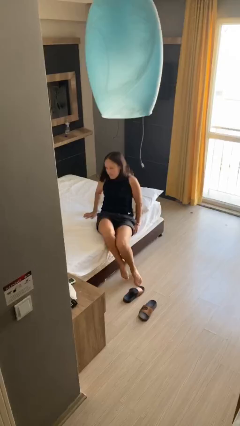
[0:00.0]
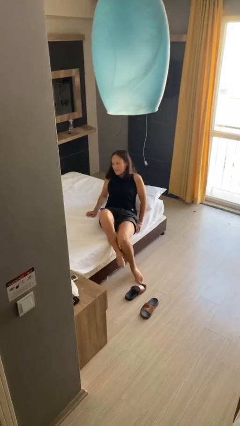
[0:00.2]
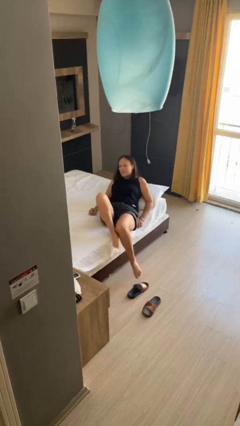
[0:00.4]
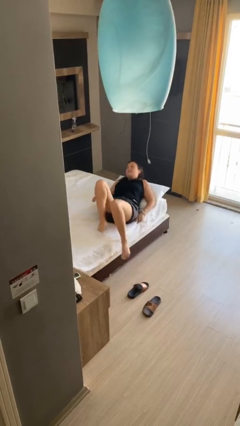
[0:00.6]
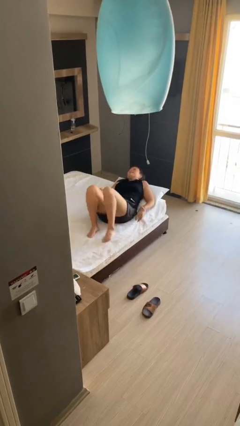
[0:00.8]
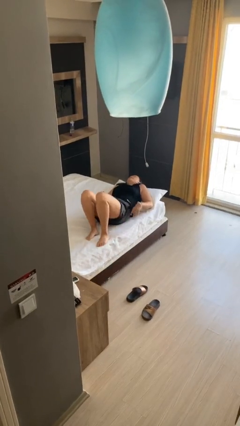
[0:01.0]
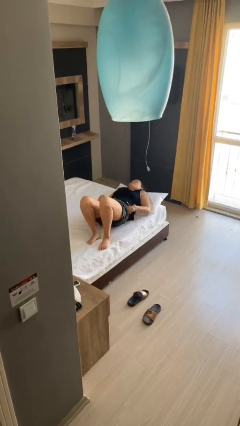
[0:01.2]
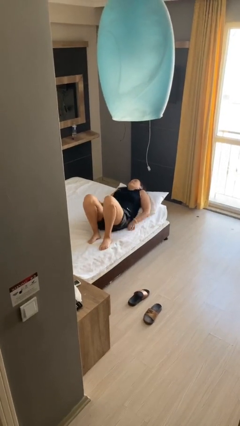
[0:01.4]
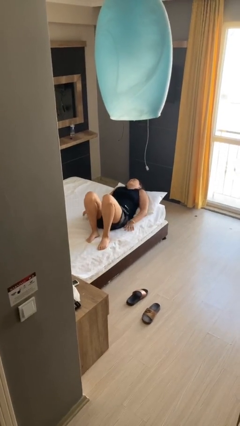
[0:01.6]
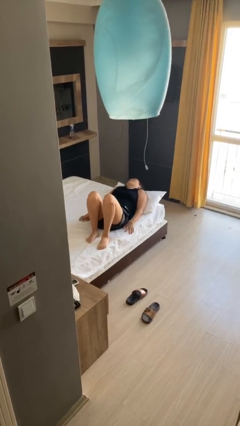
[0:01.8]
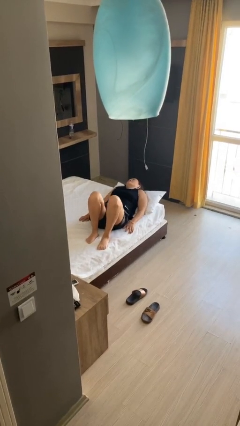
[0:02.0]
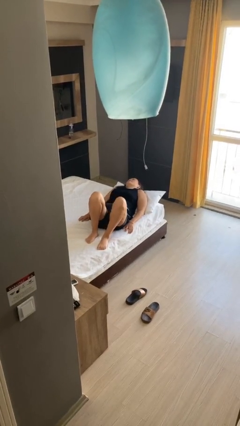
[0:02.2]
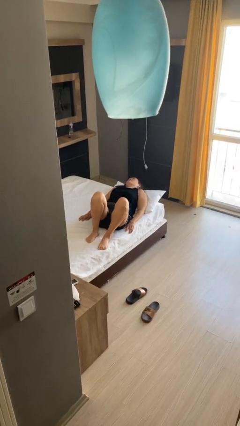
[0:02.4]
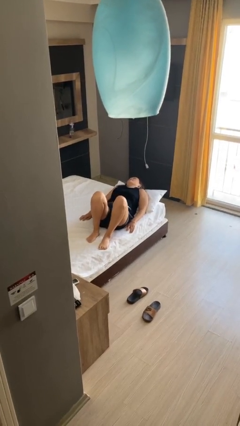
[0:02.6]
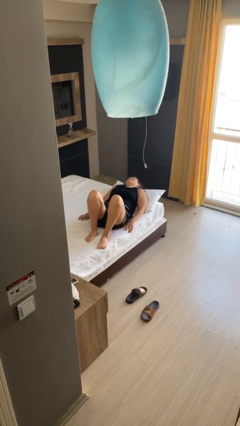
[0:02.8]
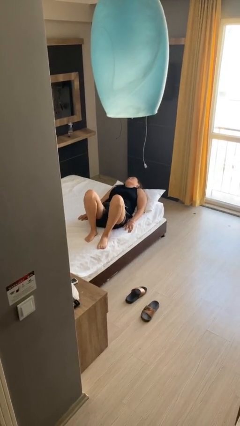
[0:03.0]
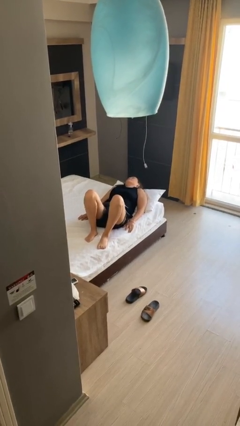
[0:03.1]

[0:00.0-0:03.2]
person lies down on bed

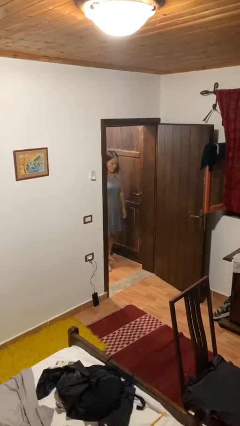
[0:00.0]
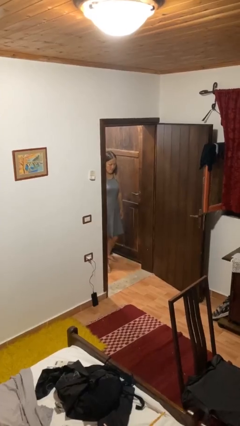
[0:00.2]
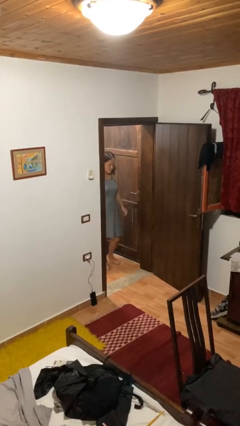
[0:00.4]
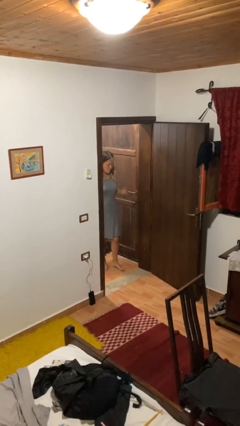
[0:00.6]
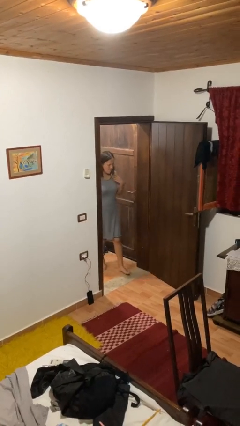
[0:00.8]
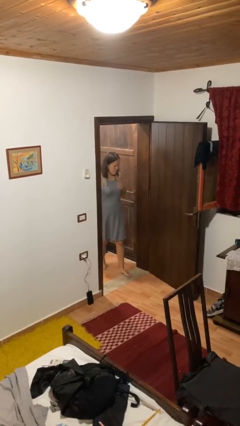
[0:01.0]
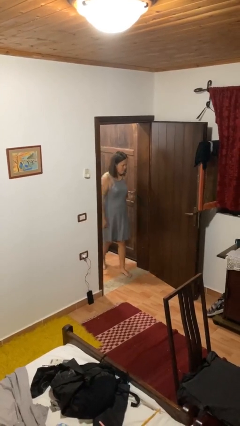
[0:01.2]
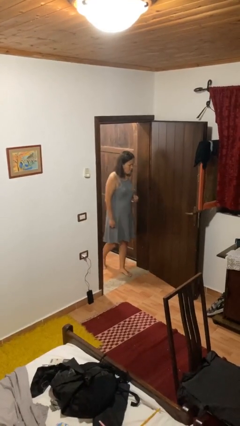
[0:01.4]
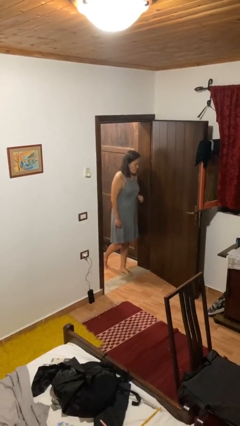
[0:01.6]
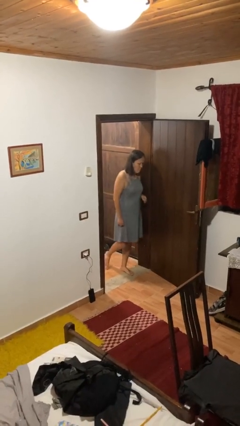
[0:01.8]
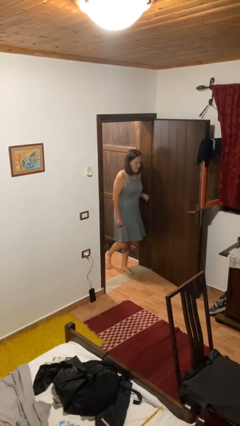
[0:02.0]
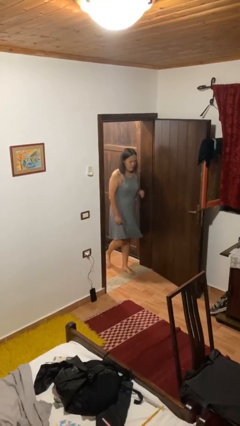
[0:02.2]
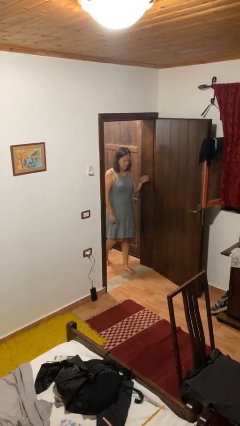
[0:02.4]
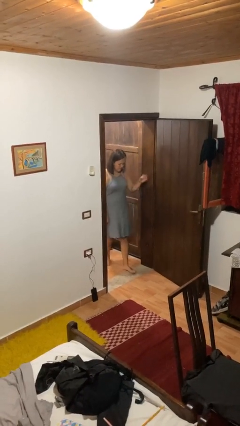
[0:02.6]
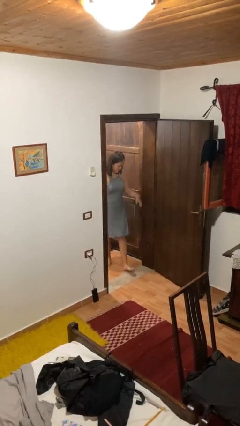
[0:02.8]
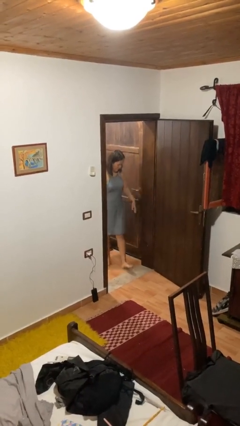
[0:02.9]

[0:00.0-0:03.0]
person bumps into wall

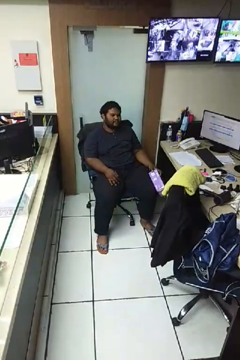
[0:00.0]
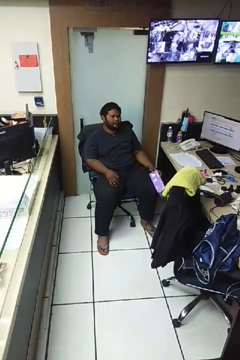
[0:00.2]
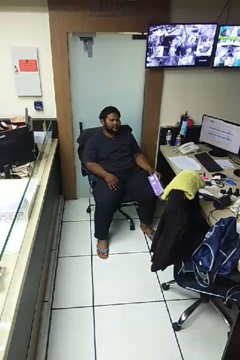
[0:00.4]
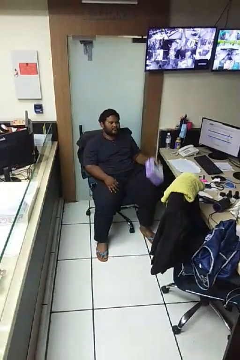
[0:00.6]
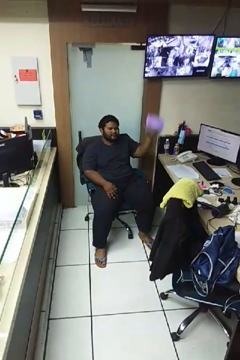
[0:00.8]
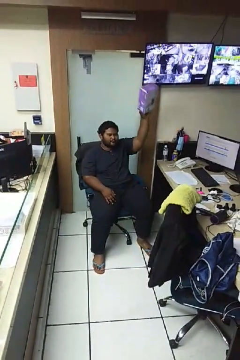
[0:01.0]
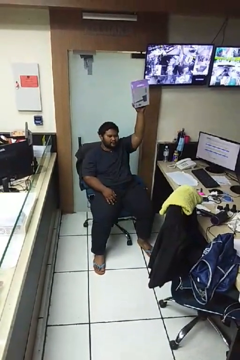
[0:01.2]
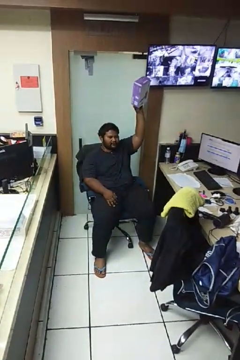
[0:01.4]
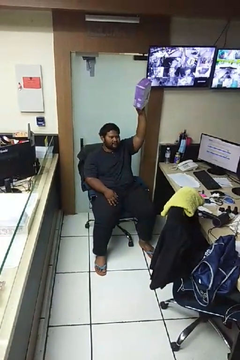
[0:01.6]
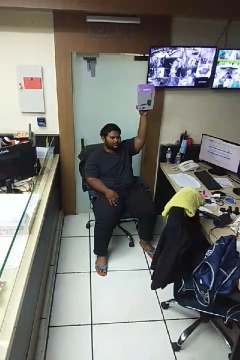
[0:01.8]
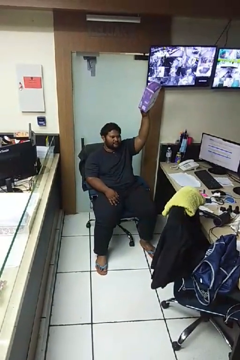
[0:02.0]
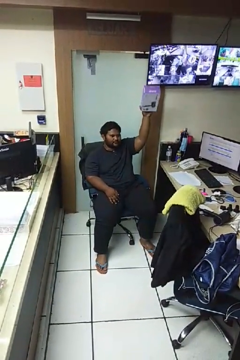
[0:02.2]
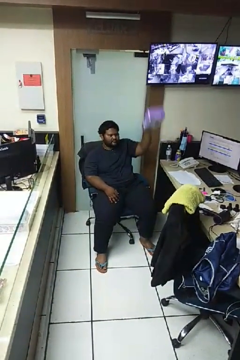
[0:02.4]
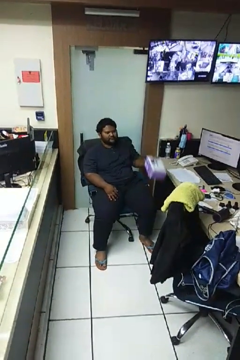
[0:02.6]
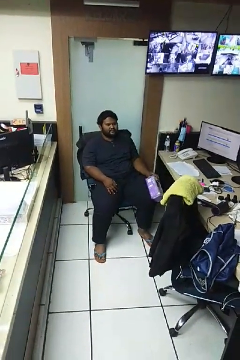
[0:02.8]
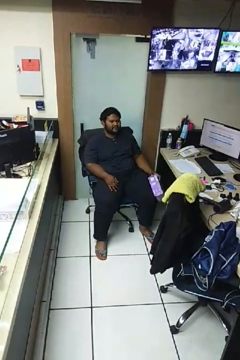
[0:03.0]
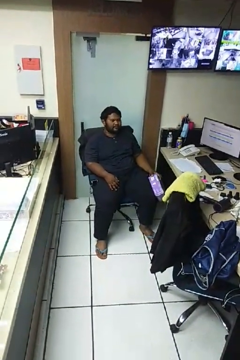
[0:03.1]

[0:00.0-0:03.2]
person holds object above head

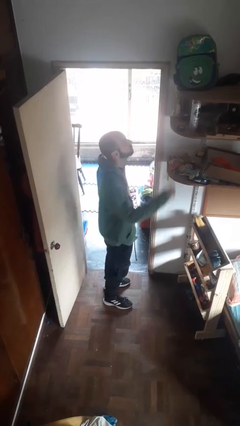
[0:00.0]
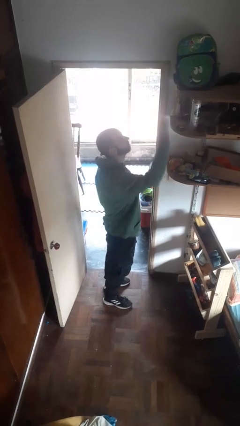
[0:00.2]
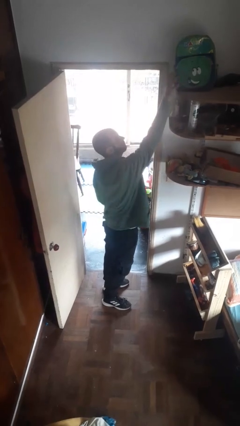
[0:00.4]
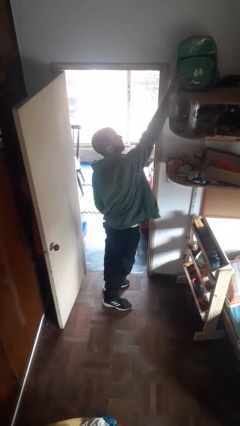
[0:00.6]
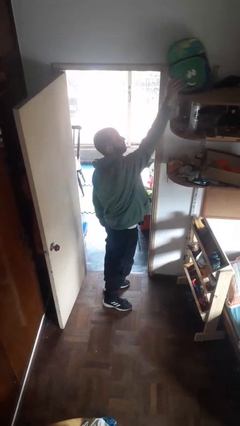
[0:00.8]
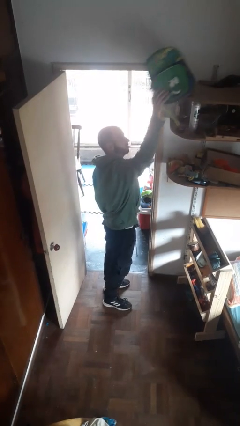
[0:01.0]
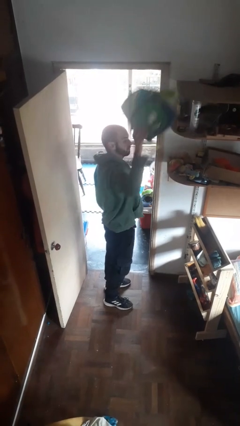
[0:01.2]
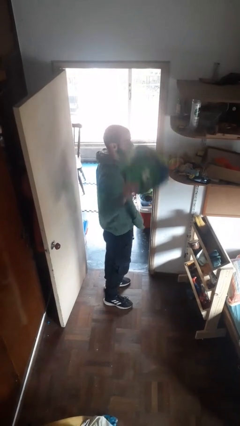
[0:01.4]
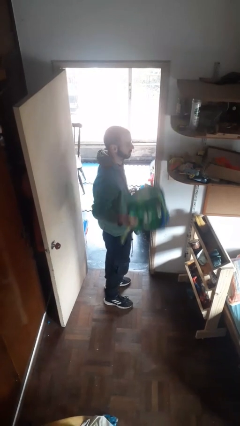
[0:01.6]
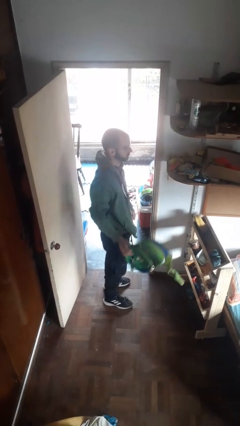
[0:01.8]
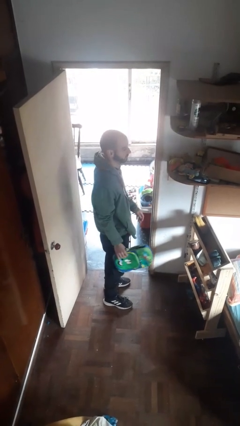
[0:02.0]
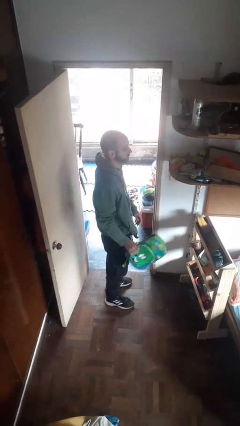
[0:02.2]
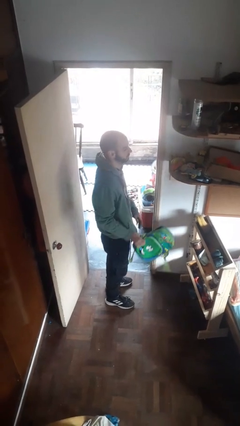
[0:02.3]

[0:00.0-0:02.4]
person puts down object on shelf

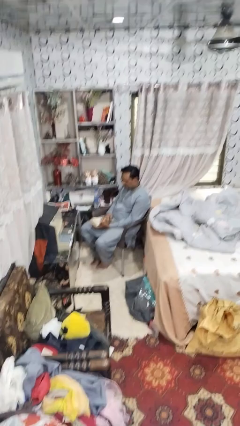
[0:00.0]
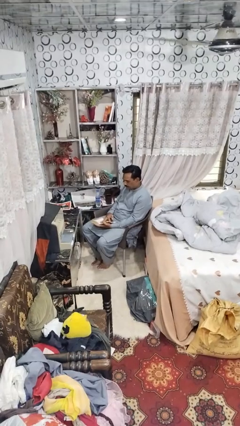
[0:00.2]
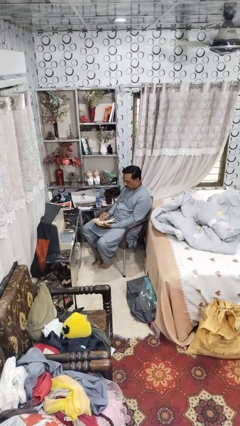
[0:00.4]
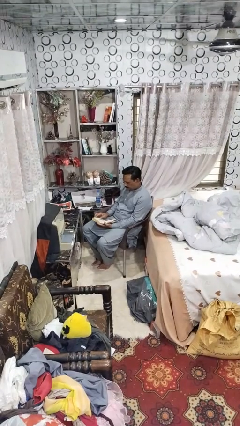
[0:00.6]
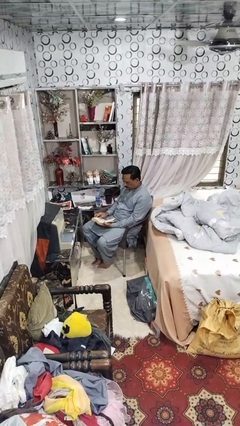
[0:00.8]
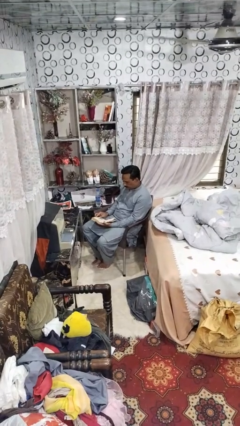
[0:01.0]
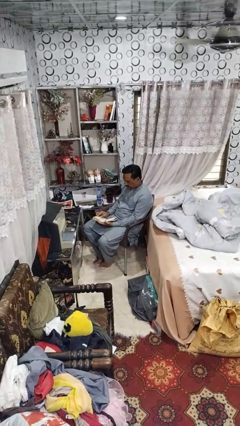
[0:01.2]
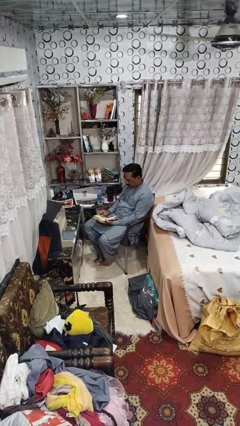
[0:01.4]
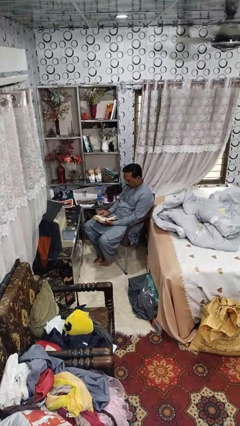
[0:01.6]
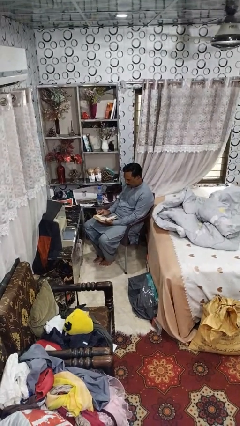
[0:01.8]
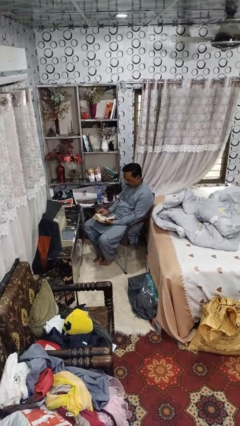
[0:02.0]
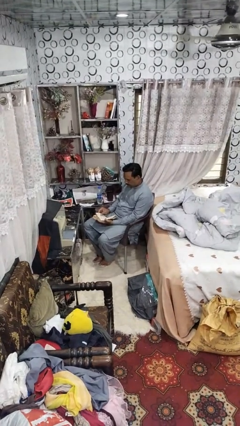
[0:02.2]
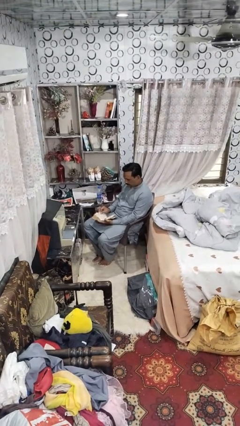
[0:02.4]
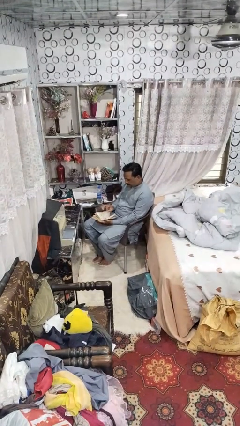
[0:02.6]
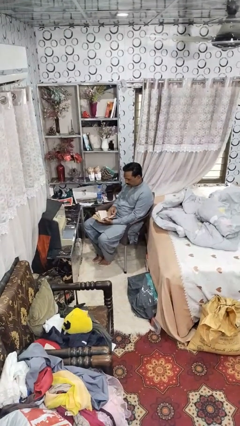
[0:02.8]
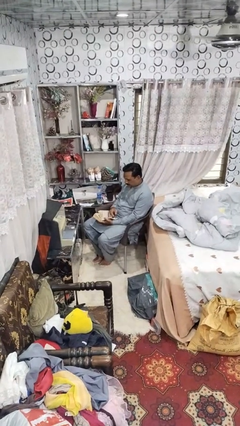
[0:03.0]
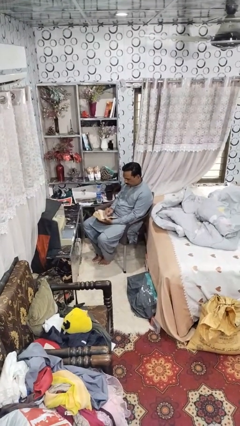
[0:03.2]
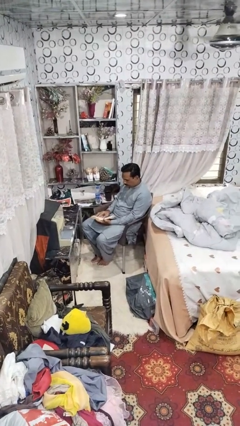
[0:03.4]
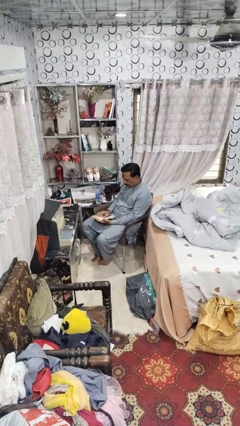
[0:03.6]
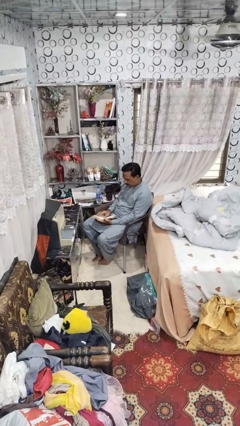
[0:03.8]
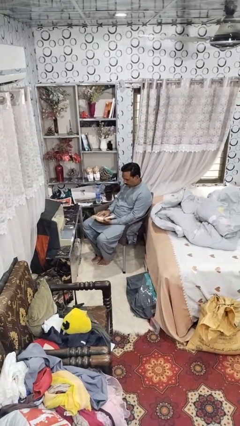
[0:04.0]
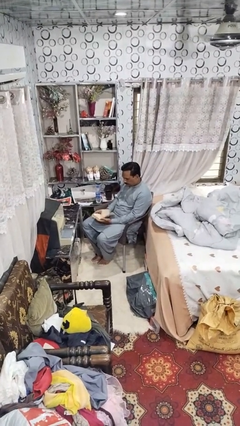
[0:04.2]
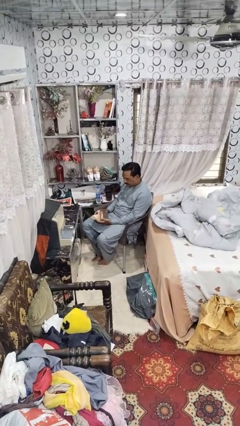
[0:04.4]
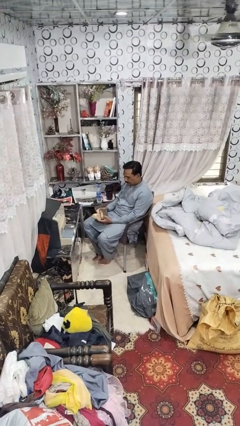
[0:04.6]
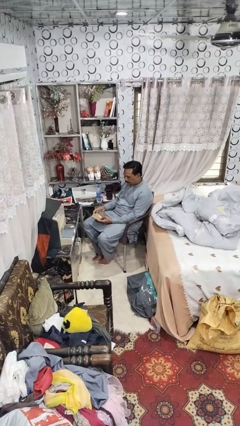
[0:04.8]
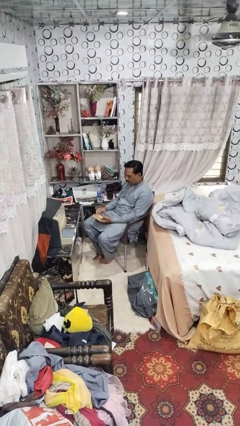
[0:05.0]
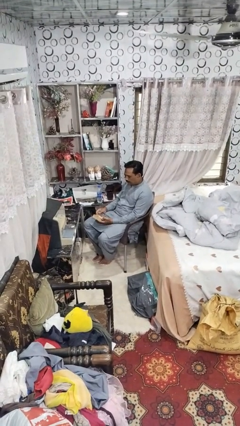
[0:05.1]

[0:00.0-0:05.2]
person reads book

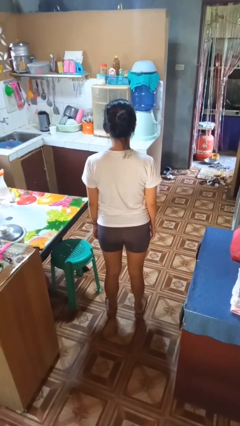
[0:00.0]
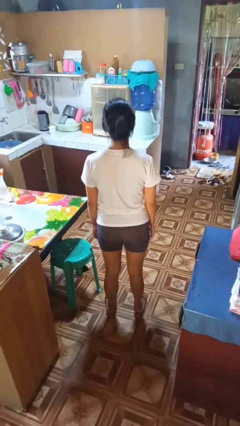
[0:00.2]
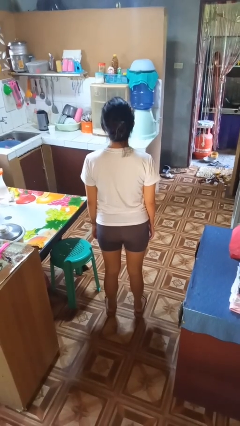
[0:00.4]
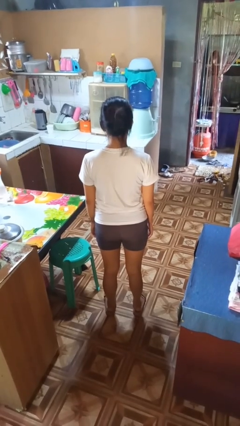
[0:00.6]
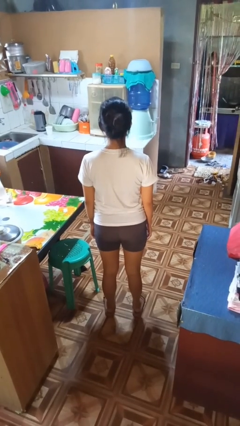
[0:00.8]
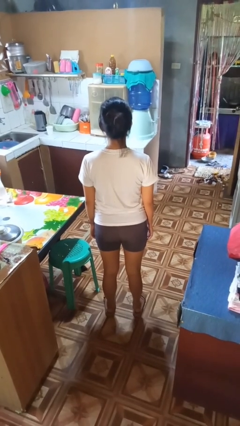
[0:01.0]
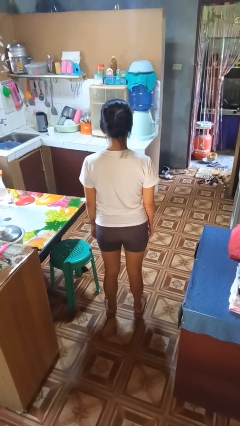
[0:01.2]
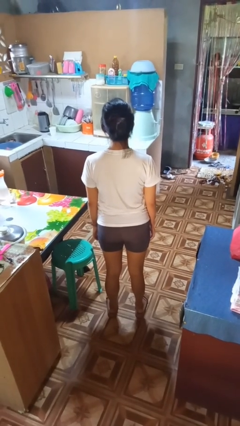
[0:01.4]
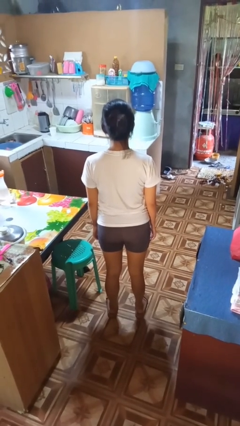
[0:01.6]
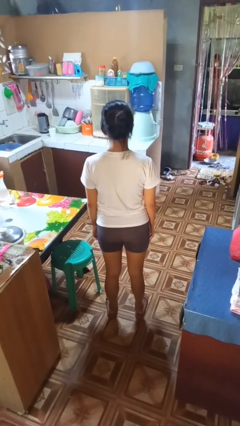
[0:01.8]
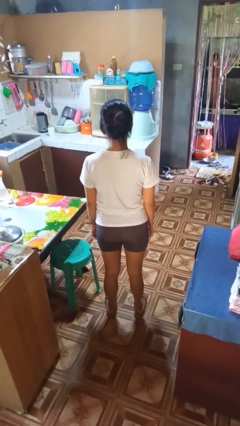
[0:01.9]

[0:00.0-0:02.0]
person nods head
